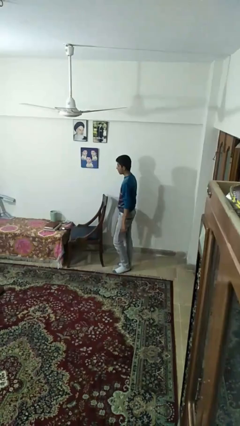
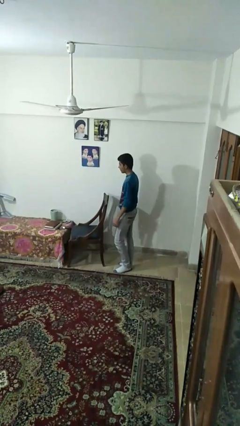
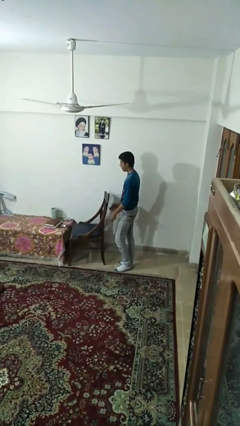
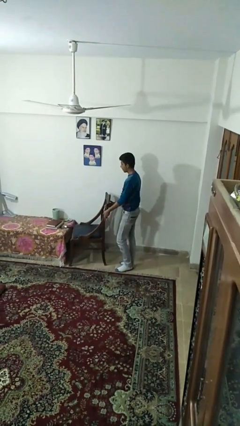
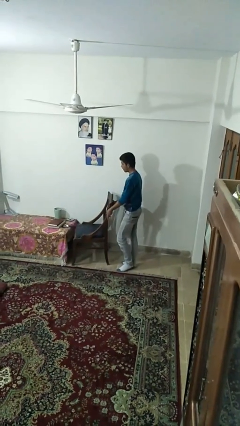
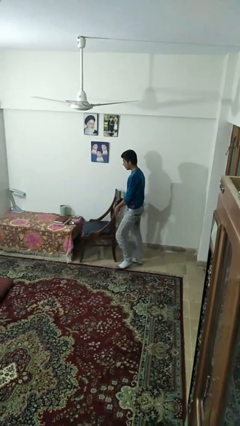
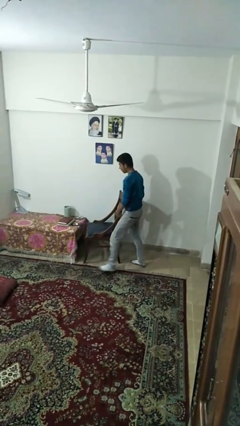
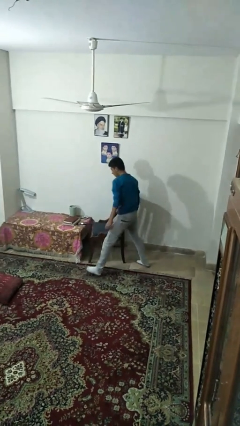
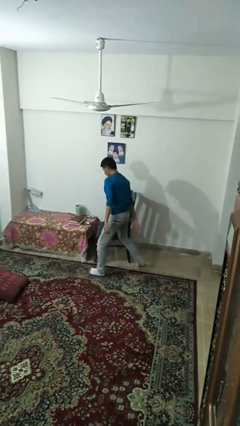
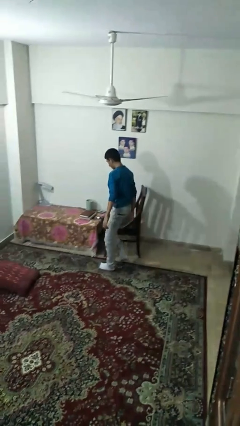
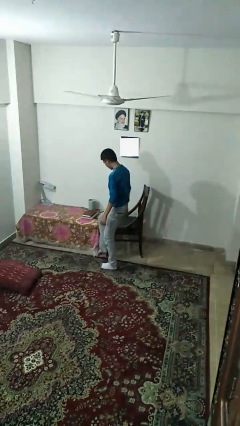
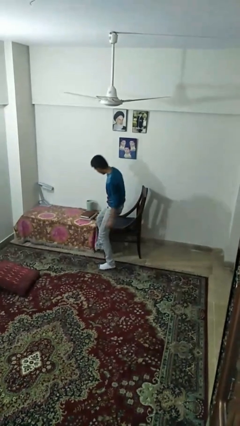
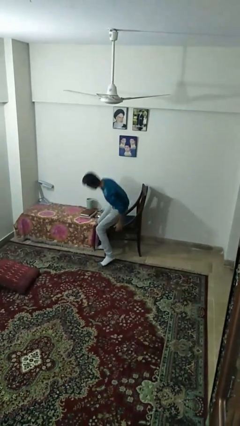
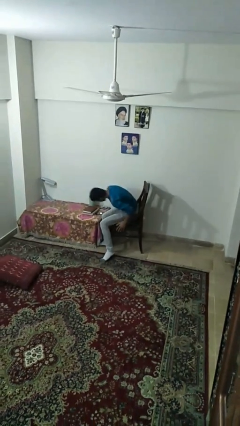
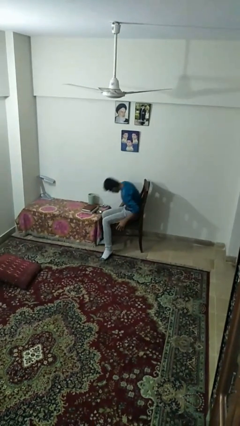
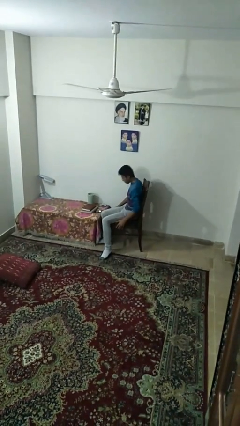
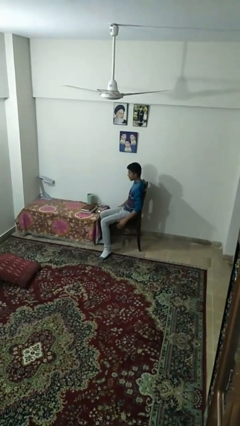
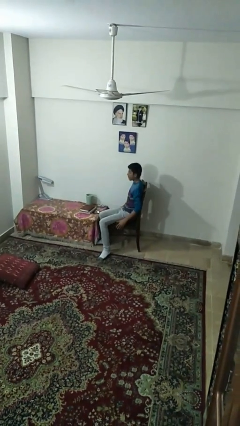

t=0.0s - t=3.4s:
person sits down

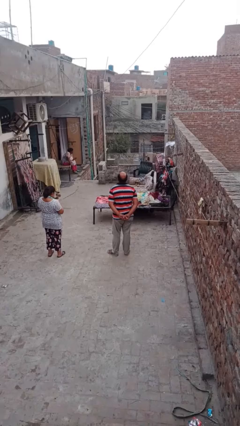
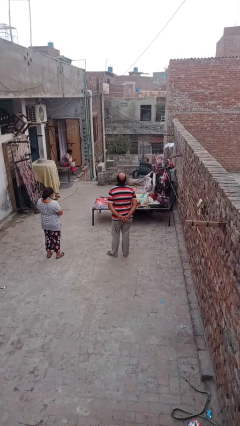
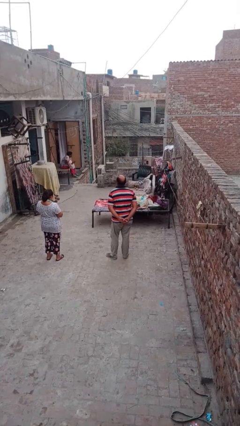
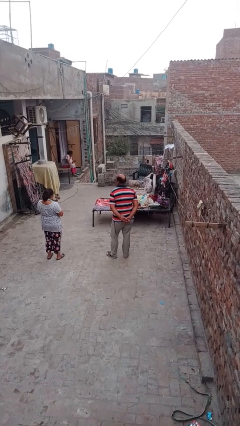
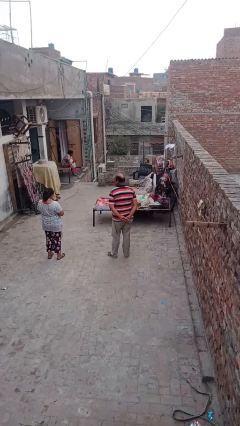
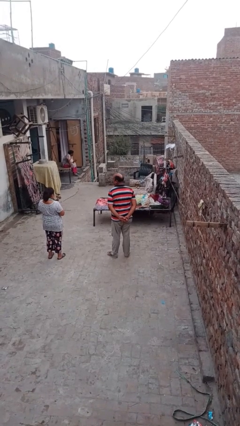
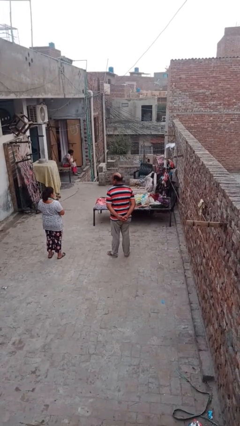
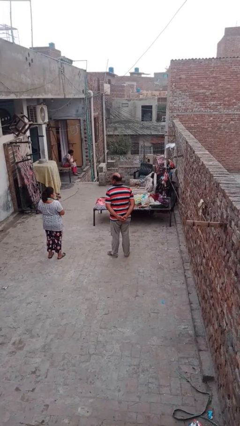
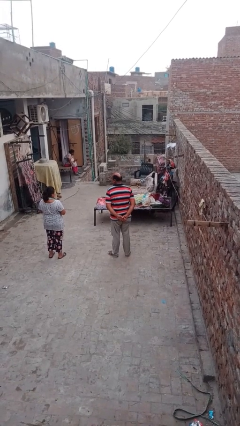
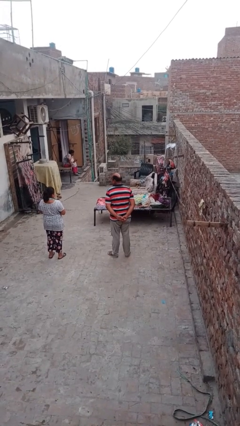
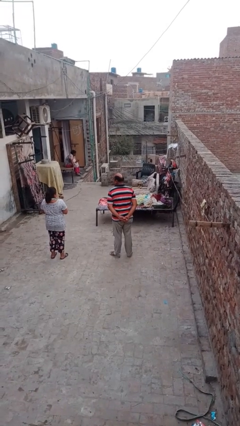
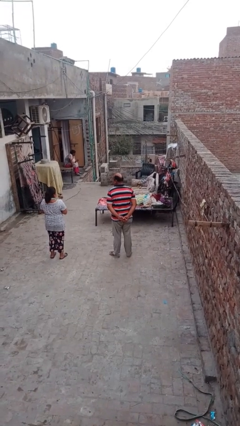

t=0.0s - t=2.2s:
person looks over shoulder

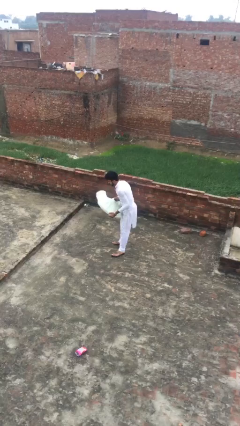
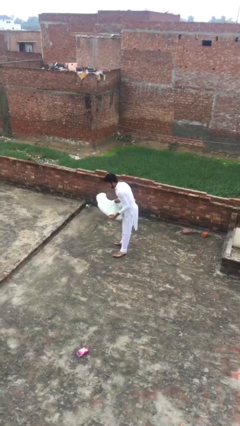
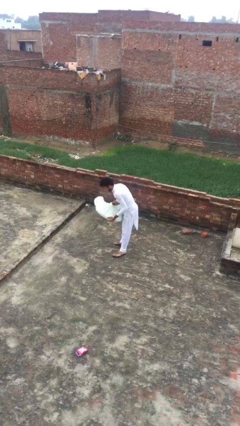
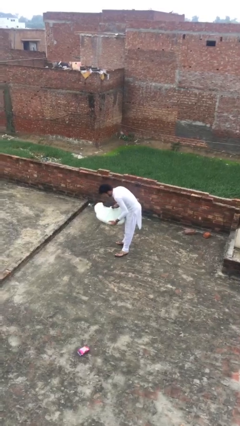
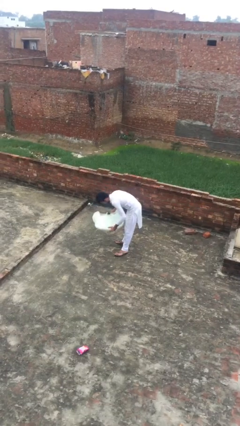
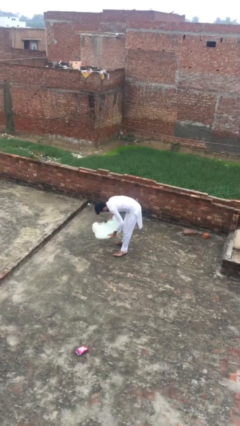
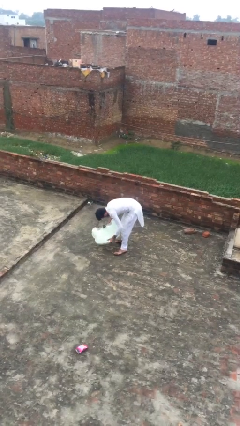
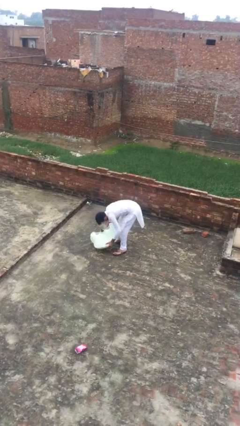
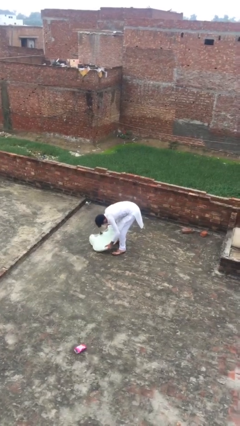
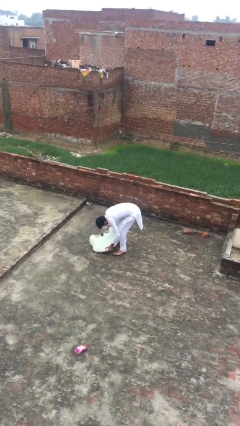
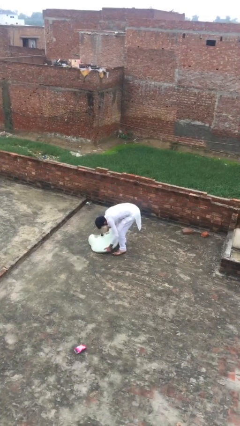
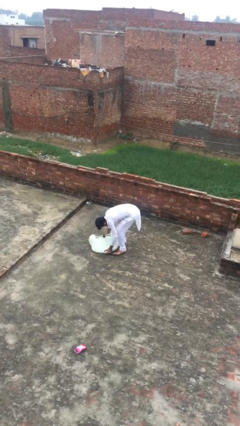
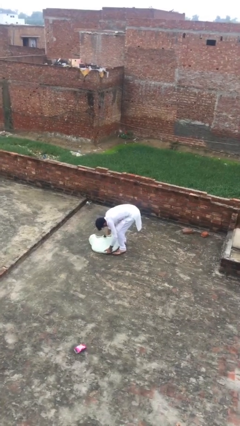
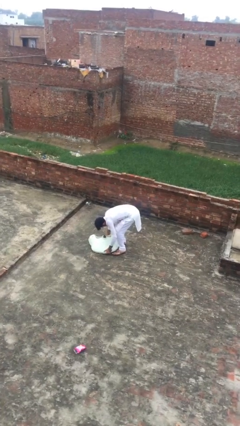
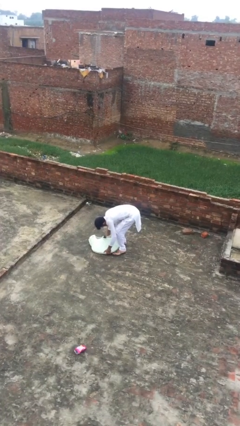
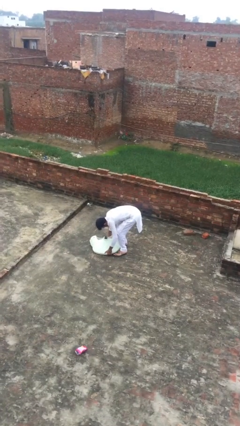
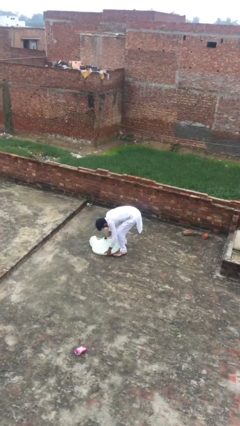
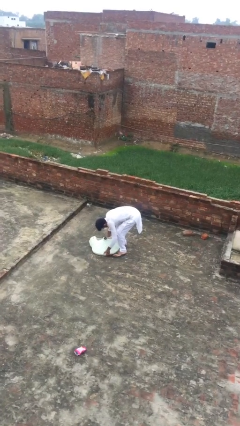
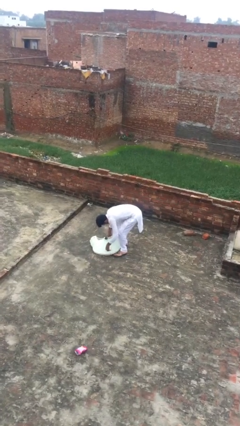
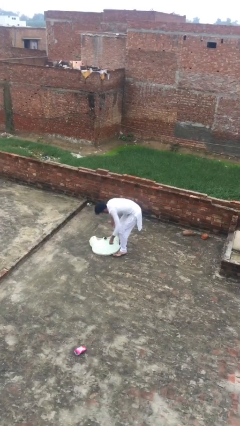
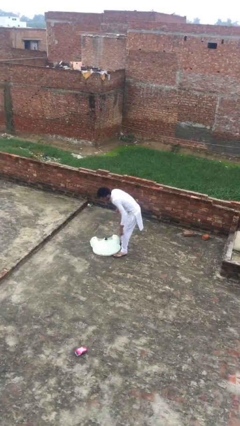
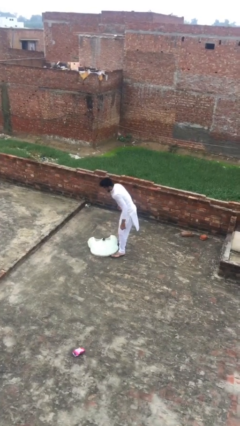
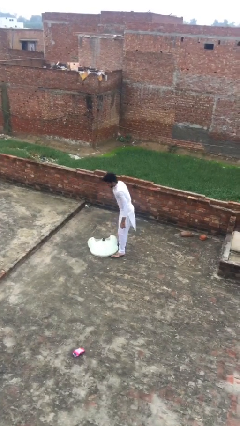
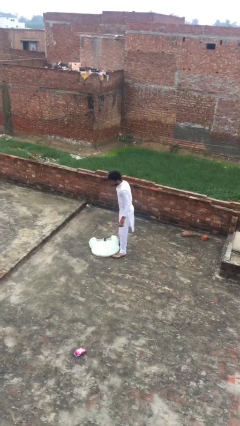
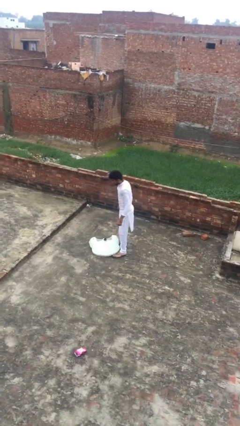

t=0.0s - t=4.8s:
person puts down object on floor

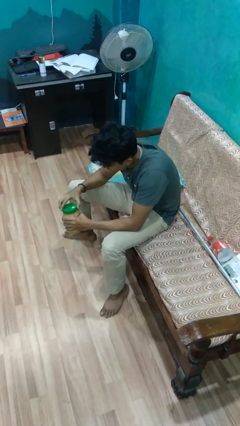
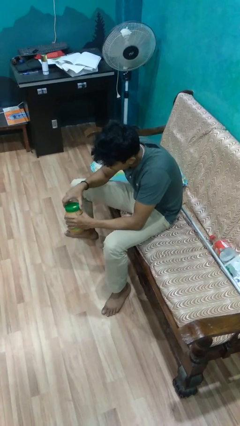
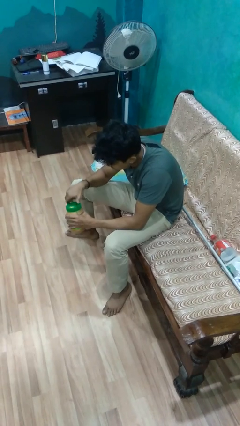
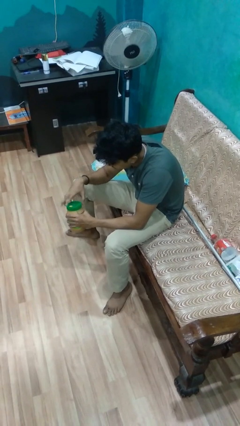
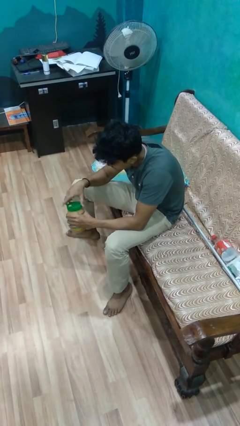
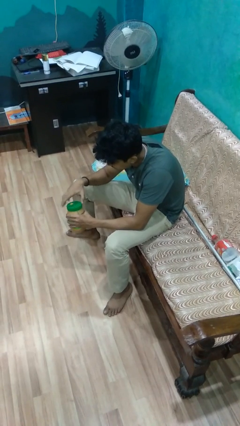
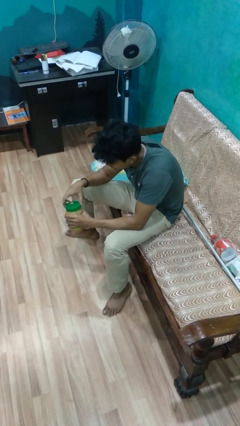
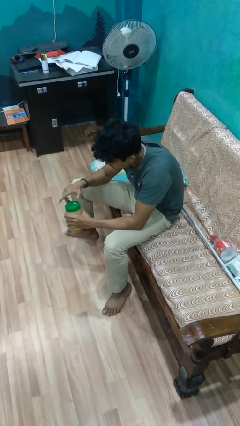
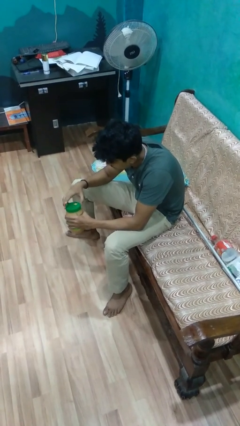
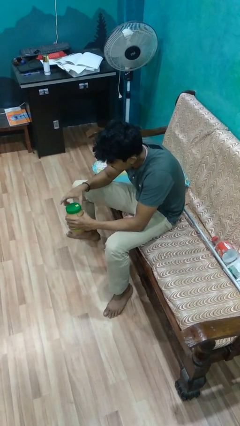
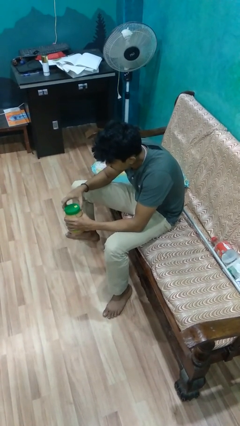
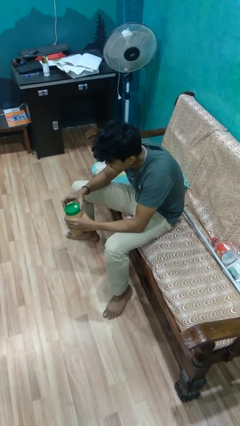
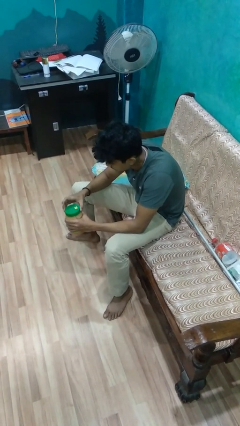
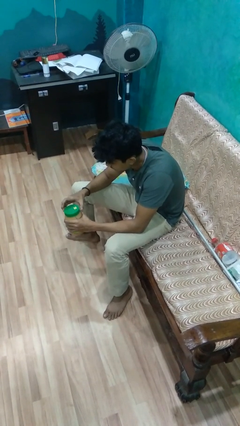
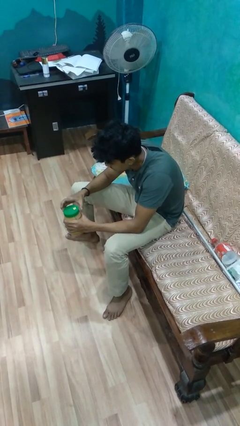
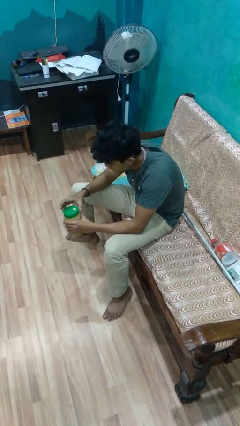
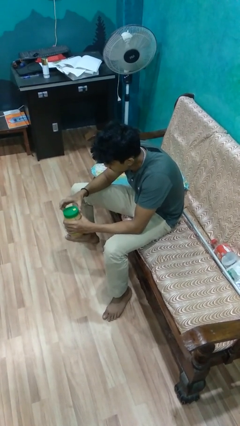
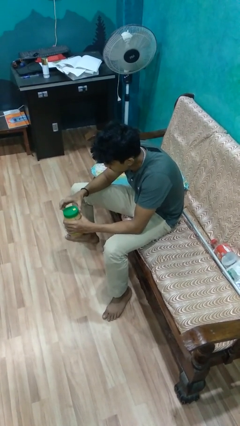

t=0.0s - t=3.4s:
person closes jar

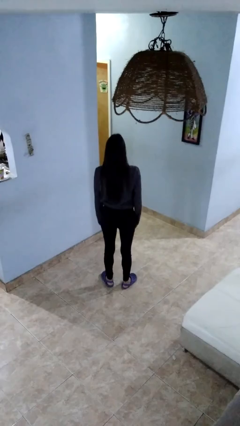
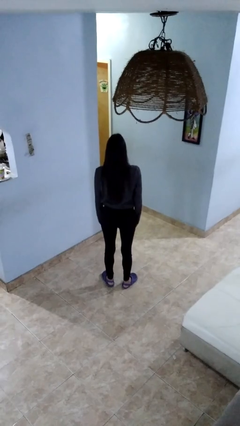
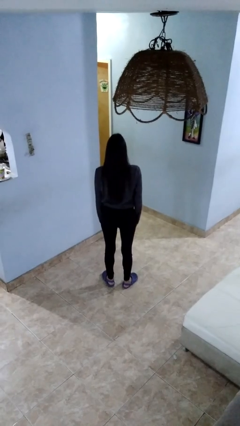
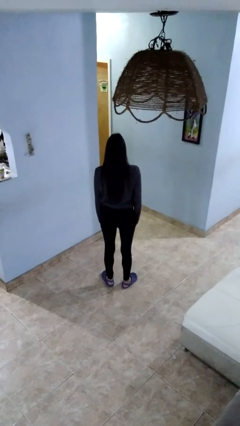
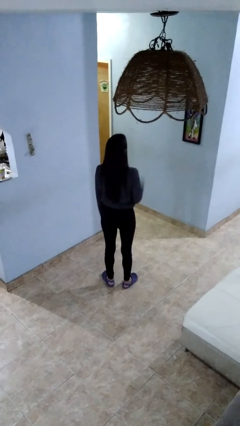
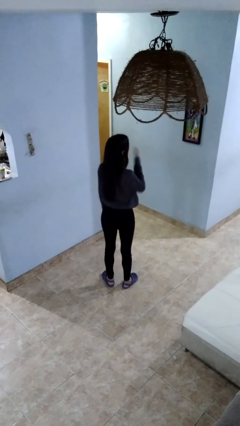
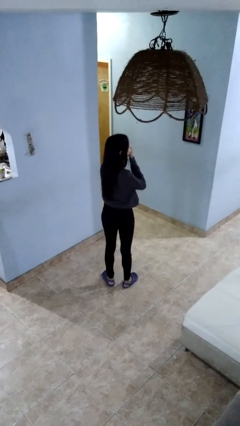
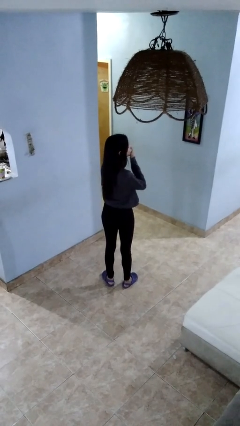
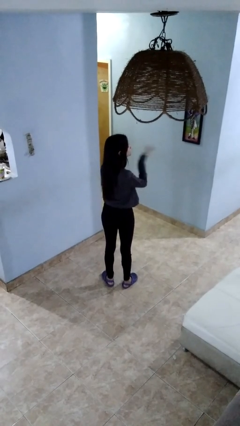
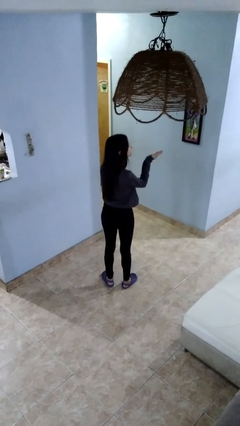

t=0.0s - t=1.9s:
person gestures blow kiss

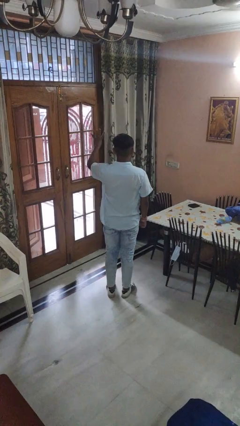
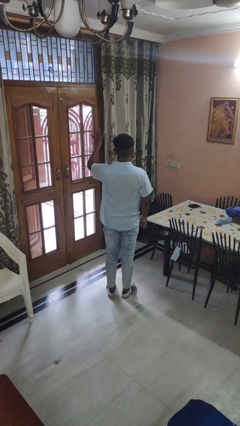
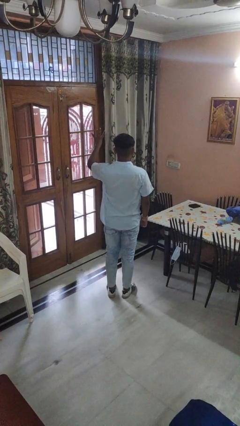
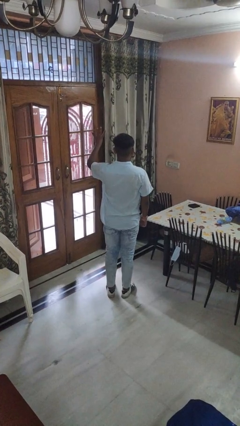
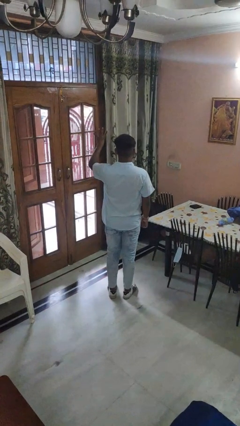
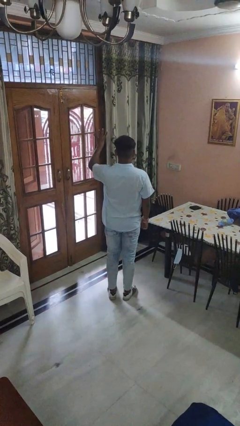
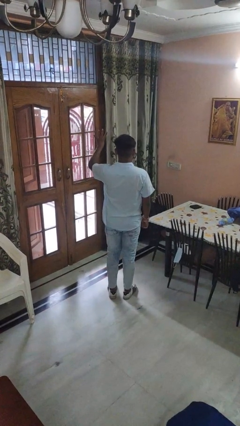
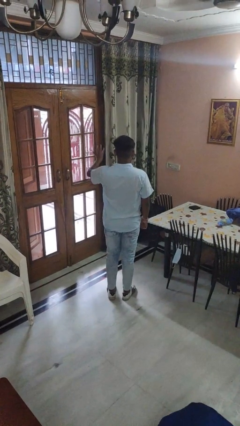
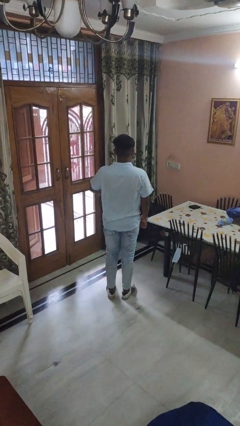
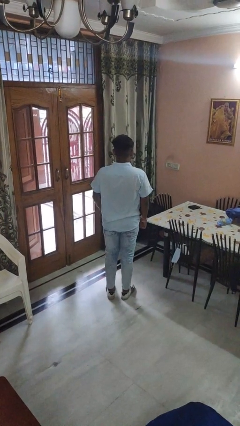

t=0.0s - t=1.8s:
person gestures number four
